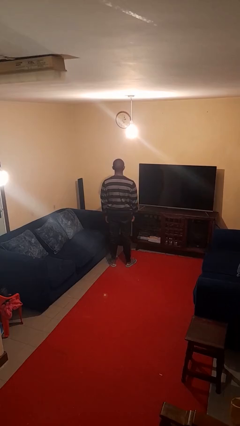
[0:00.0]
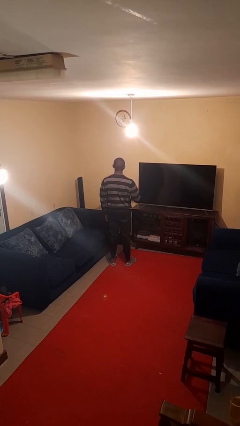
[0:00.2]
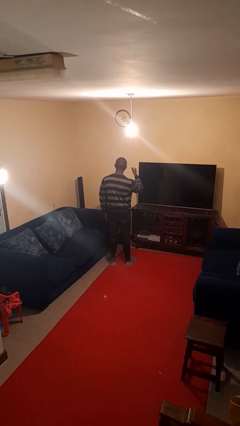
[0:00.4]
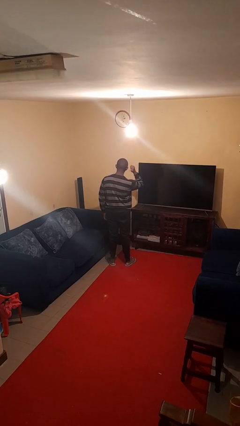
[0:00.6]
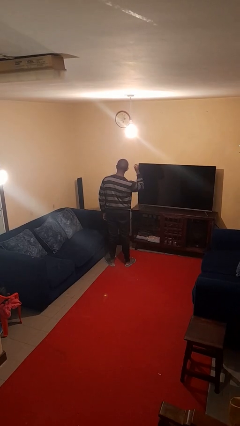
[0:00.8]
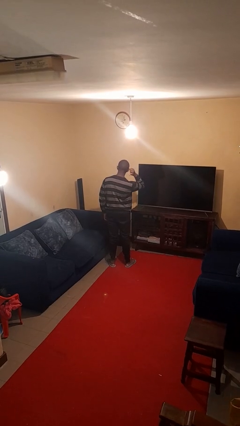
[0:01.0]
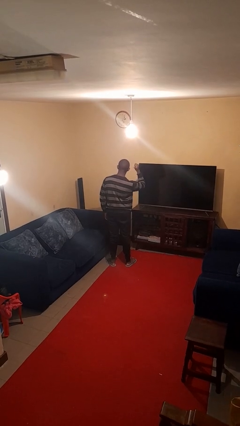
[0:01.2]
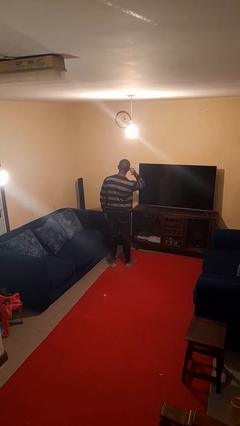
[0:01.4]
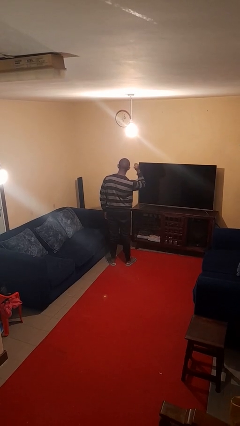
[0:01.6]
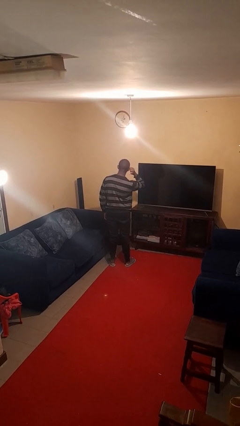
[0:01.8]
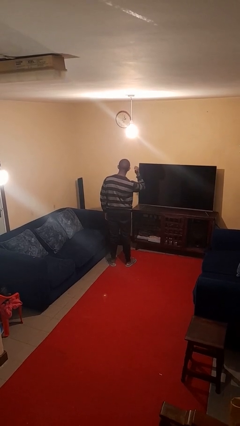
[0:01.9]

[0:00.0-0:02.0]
person gestures behind me

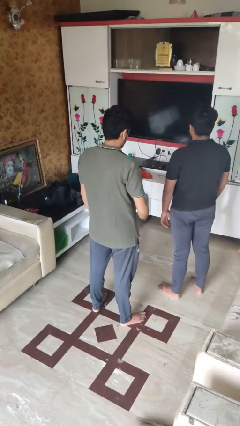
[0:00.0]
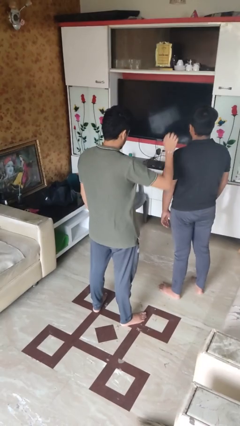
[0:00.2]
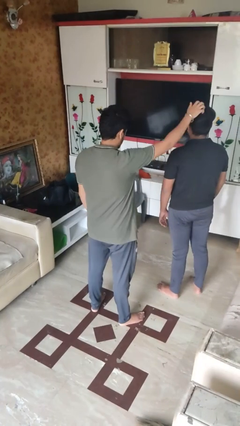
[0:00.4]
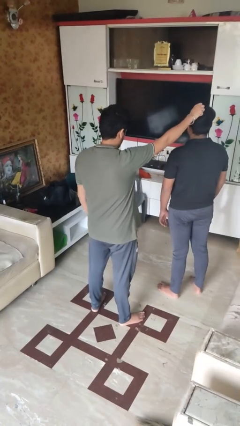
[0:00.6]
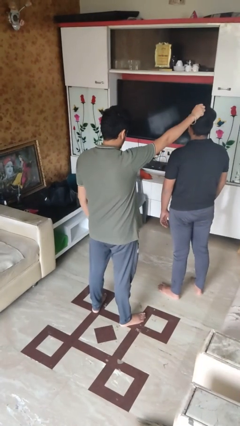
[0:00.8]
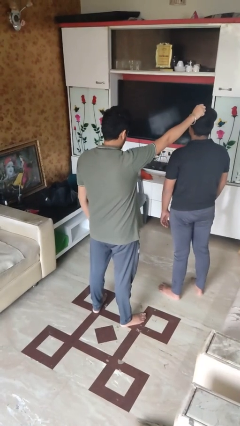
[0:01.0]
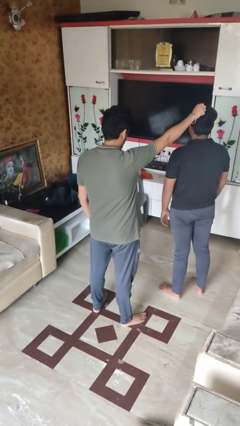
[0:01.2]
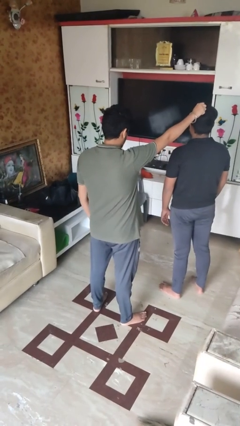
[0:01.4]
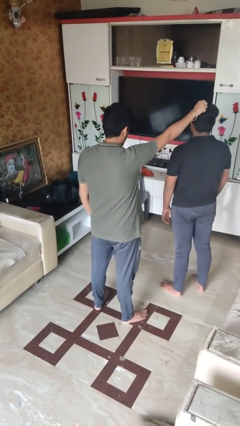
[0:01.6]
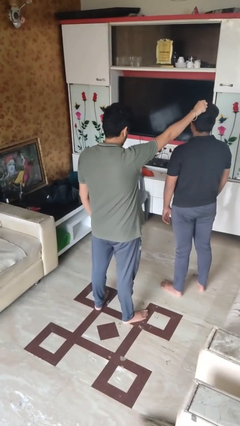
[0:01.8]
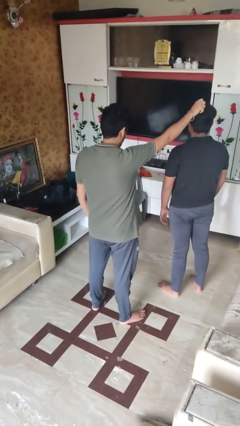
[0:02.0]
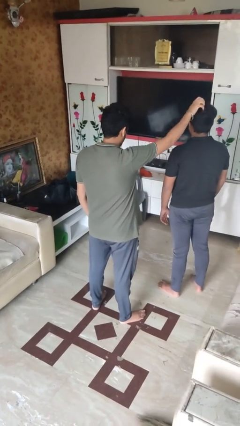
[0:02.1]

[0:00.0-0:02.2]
person grabs person by hair

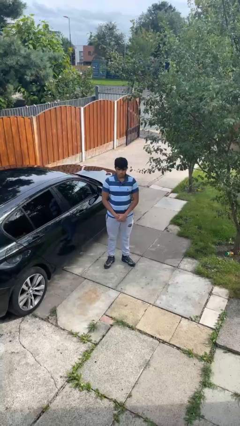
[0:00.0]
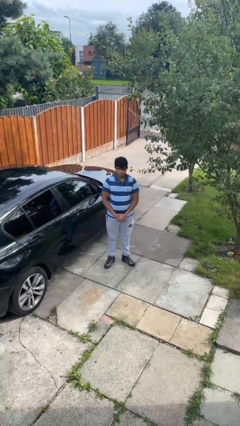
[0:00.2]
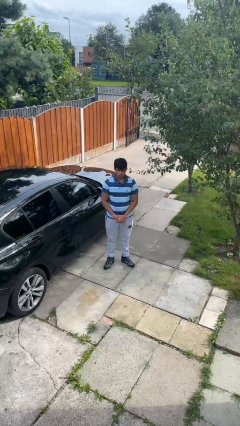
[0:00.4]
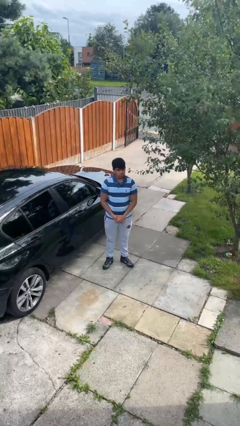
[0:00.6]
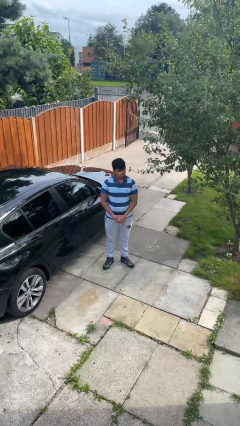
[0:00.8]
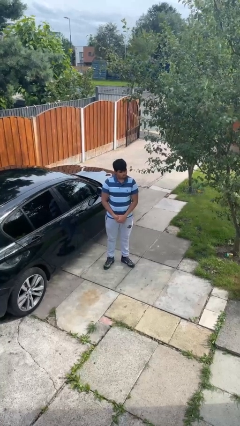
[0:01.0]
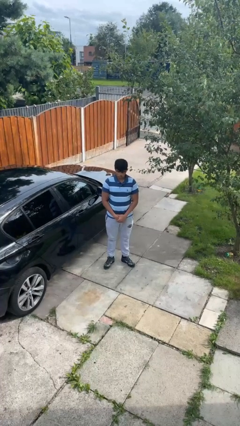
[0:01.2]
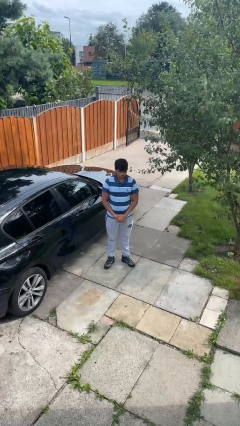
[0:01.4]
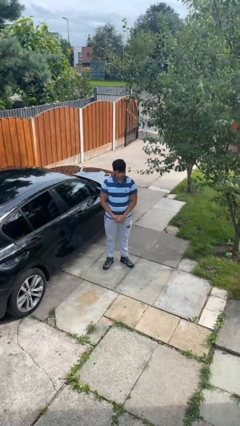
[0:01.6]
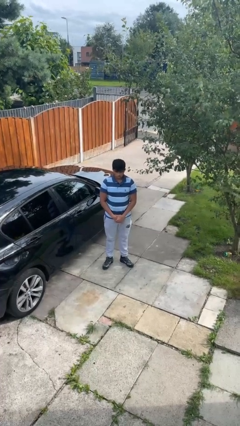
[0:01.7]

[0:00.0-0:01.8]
person shakes head

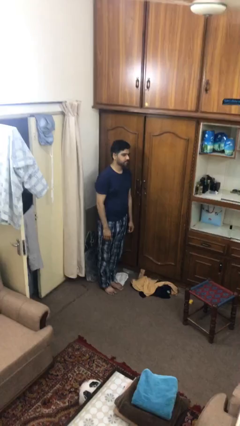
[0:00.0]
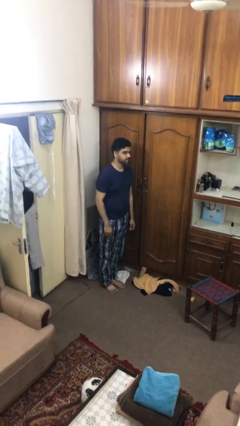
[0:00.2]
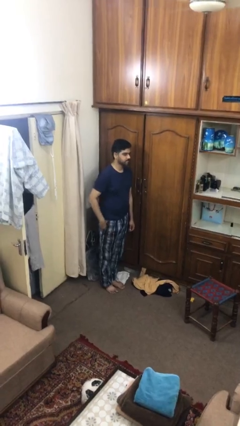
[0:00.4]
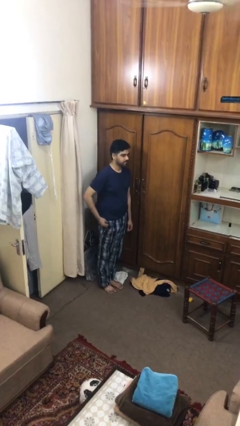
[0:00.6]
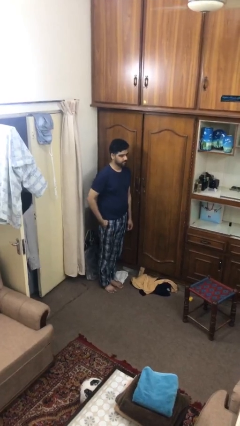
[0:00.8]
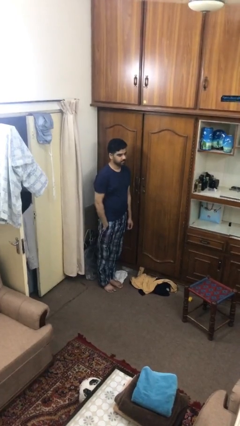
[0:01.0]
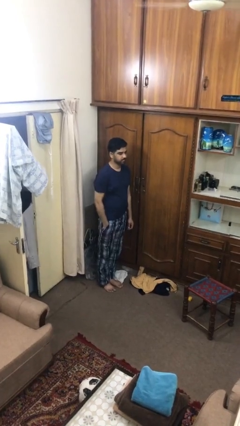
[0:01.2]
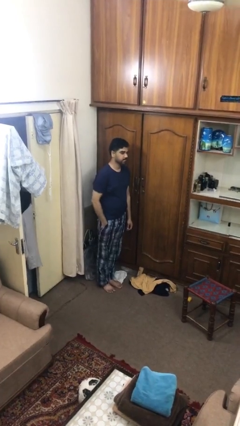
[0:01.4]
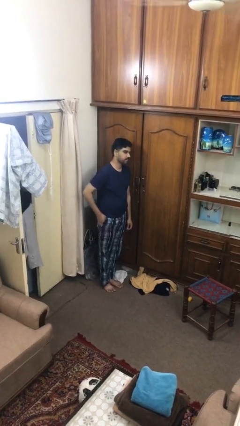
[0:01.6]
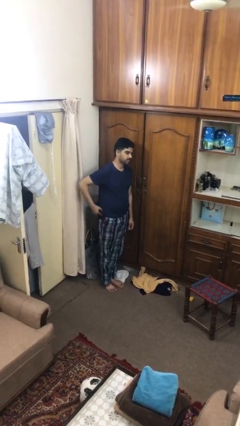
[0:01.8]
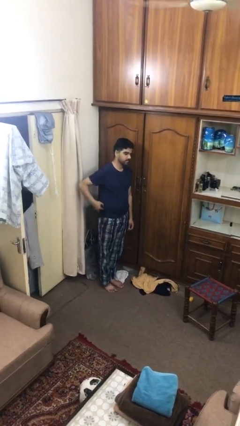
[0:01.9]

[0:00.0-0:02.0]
person takes phone from pocket

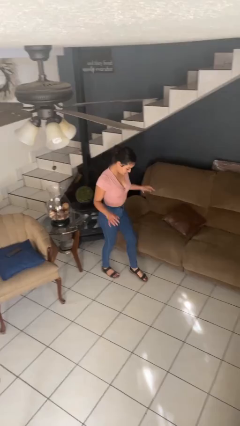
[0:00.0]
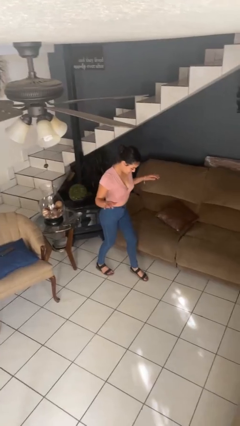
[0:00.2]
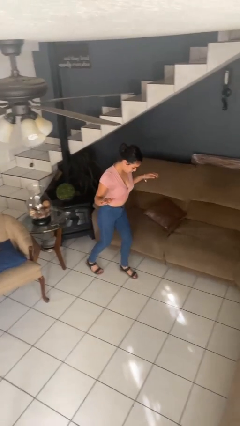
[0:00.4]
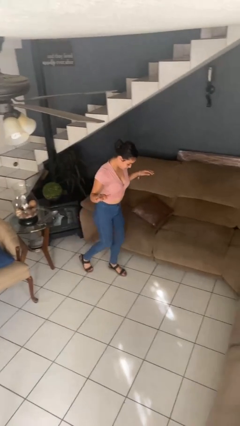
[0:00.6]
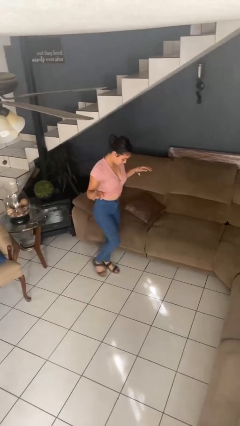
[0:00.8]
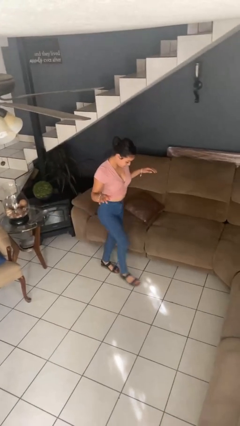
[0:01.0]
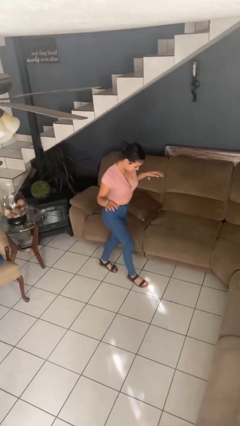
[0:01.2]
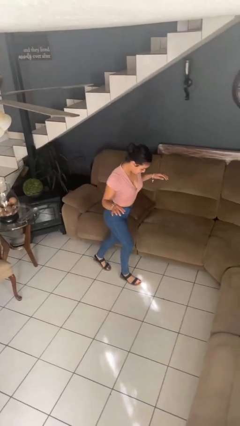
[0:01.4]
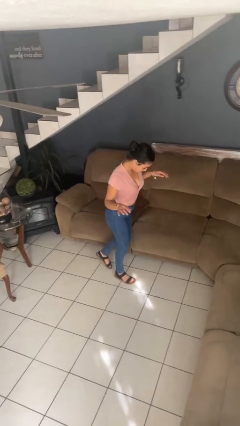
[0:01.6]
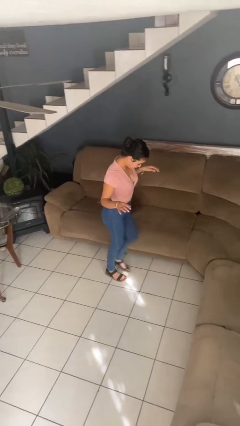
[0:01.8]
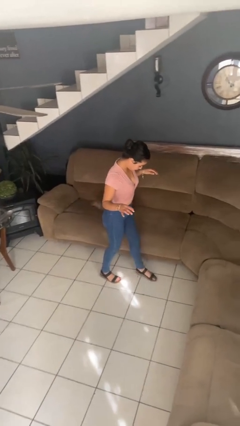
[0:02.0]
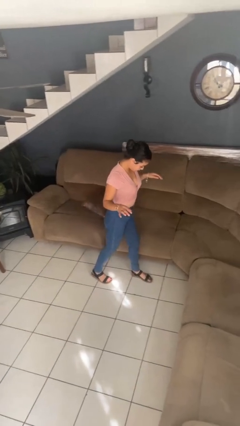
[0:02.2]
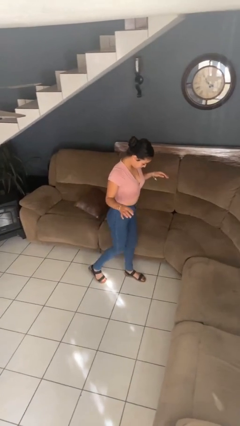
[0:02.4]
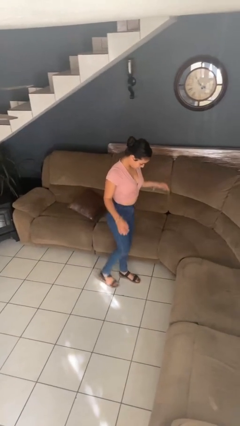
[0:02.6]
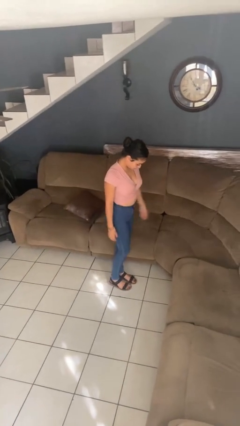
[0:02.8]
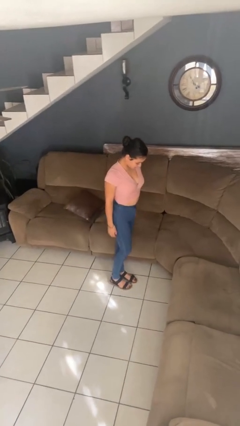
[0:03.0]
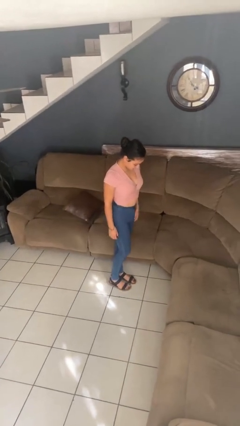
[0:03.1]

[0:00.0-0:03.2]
person walks tiptoe

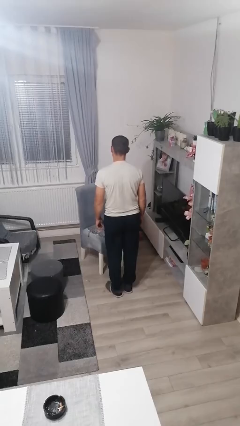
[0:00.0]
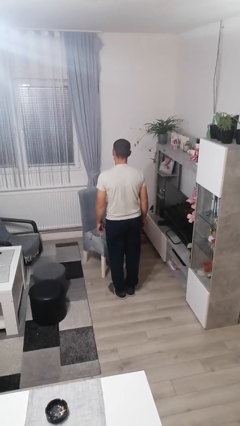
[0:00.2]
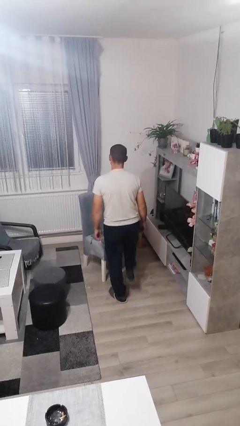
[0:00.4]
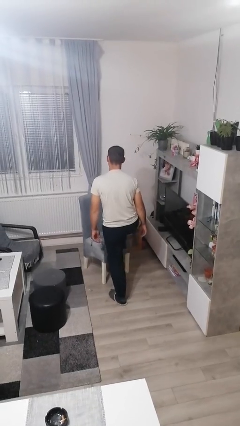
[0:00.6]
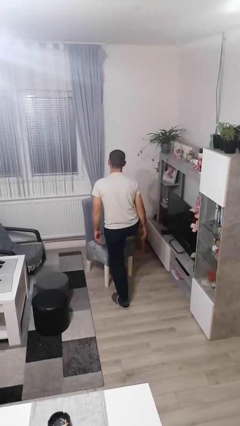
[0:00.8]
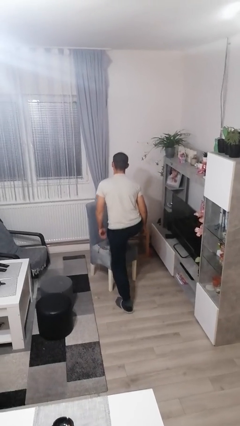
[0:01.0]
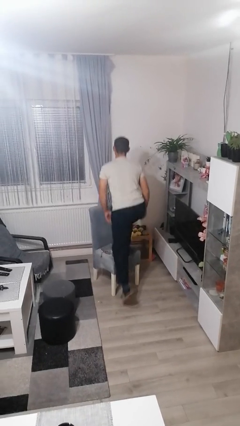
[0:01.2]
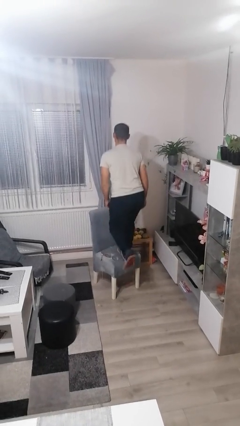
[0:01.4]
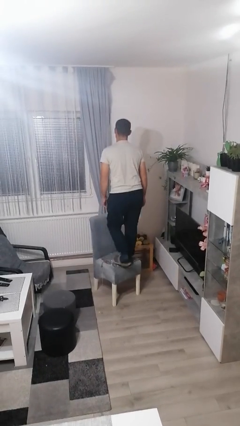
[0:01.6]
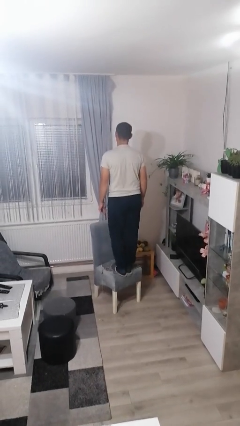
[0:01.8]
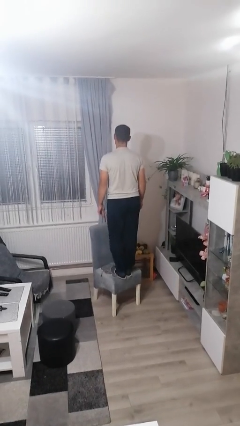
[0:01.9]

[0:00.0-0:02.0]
person climbs on chair

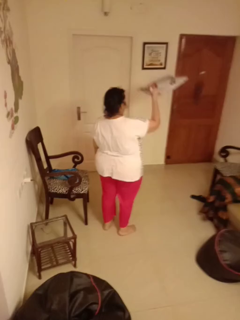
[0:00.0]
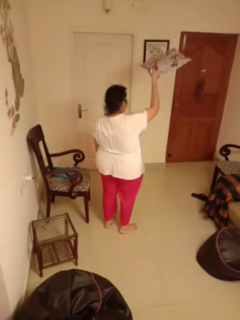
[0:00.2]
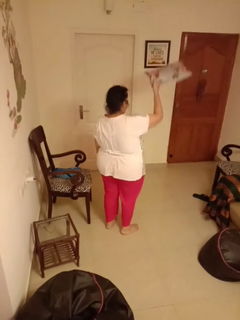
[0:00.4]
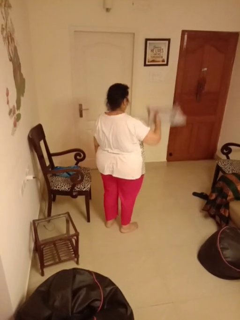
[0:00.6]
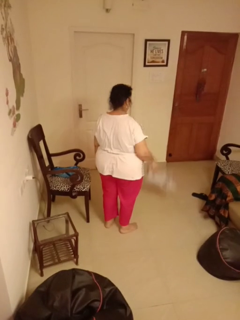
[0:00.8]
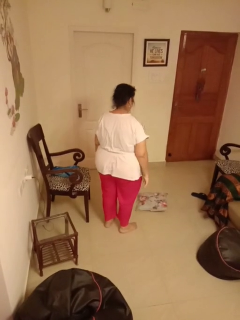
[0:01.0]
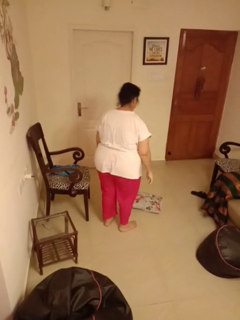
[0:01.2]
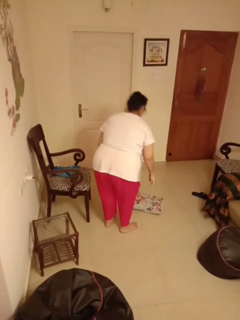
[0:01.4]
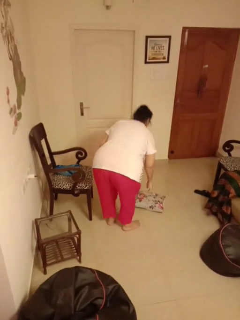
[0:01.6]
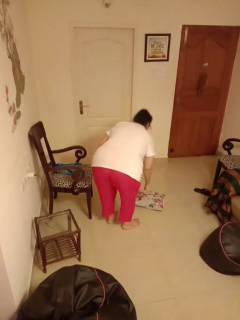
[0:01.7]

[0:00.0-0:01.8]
person throws object into air

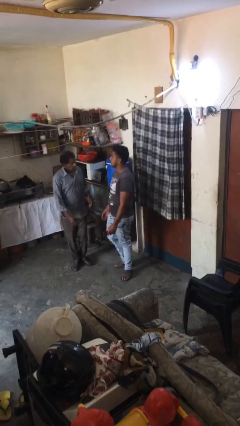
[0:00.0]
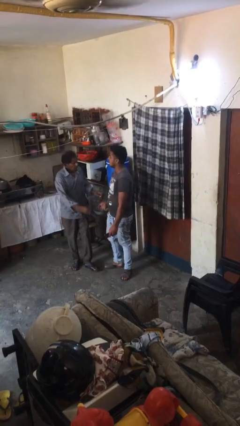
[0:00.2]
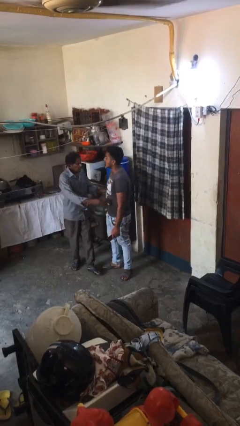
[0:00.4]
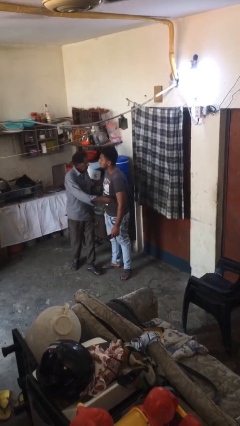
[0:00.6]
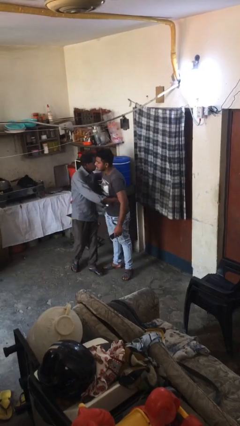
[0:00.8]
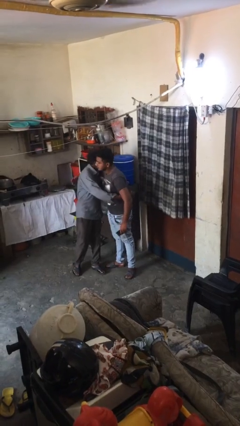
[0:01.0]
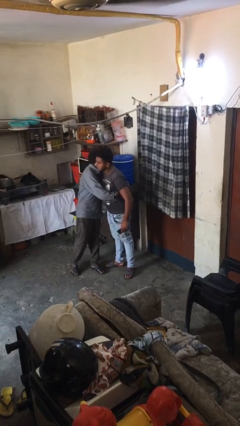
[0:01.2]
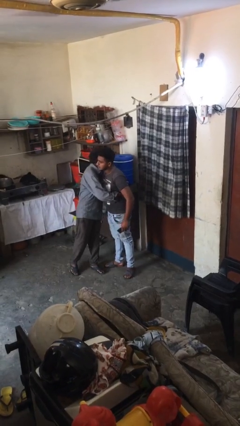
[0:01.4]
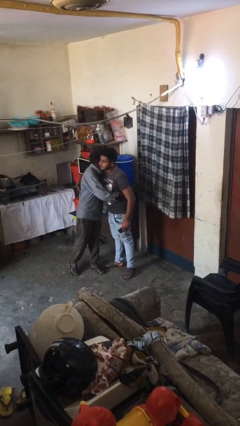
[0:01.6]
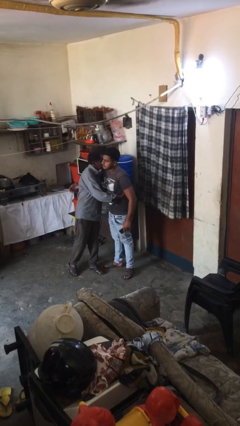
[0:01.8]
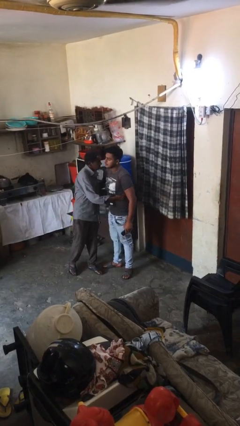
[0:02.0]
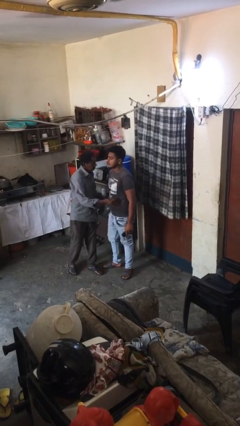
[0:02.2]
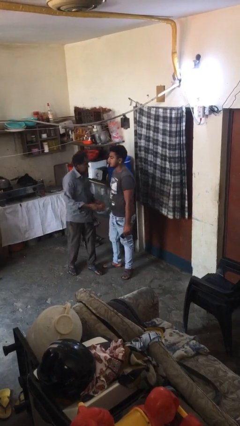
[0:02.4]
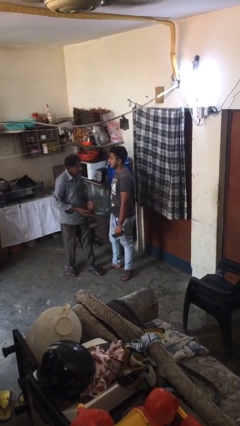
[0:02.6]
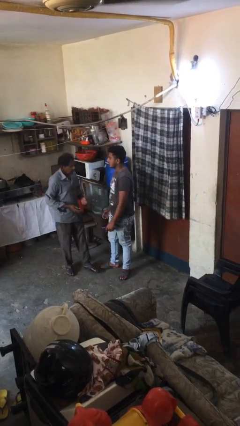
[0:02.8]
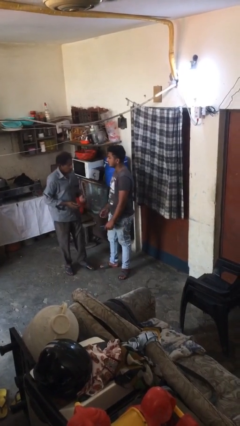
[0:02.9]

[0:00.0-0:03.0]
person embraces person
